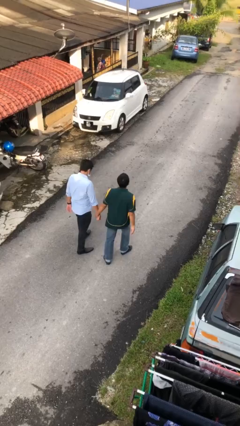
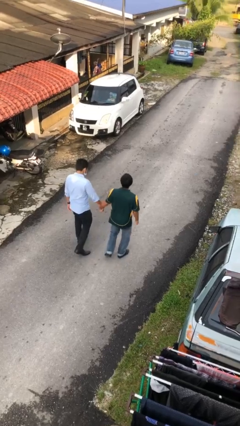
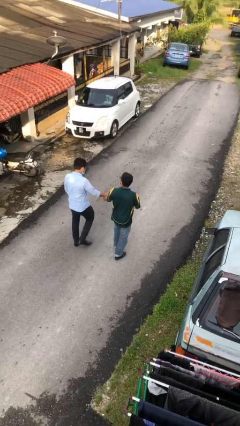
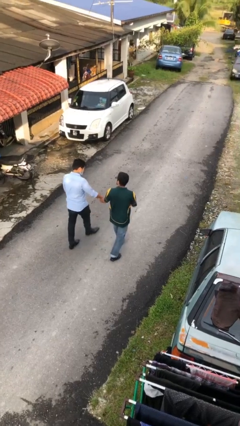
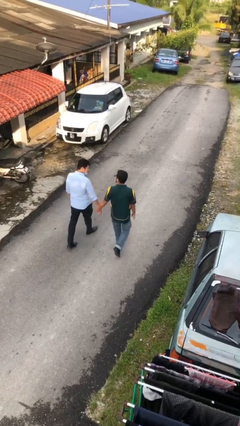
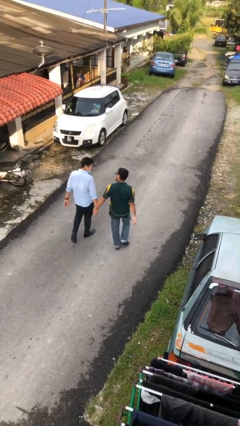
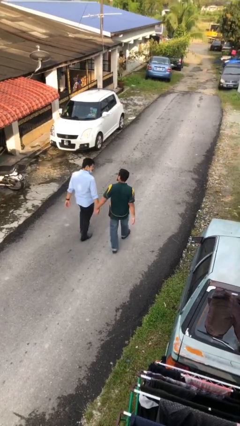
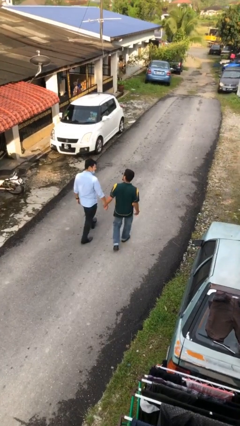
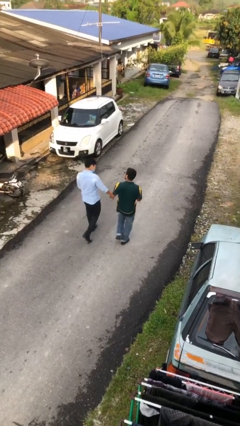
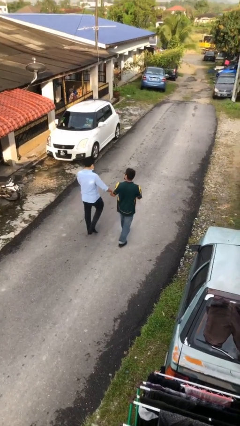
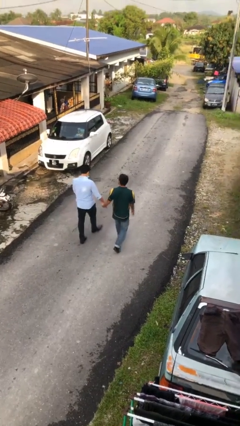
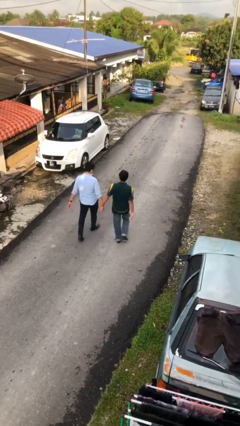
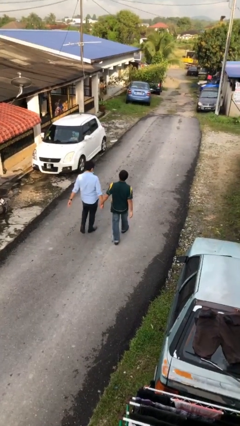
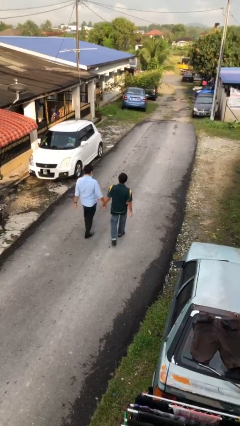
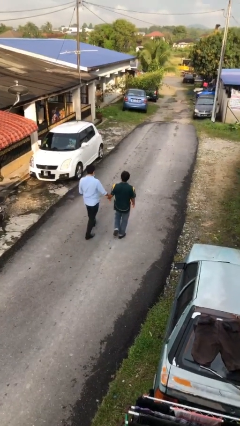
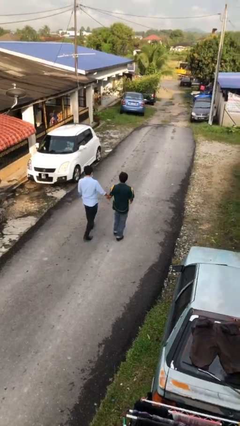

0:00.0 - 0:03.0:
person holds hand

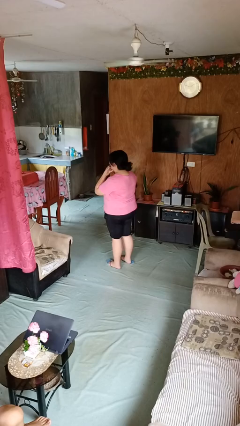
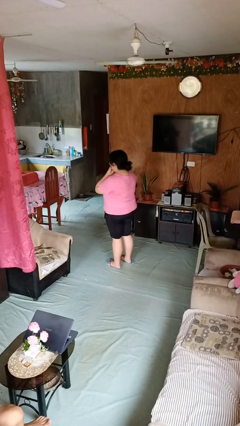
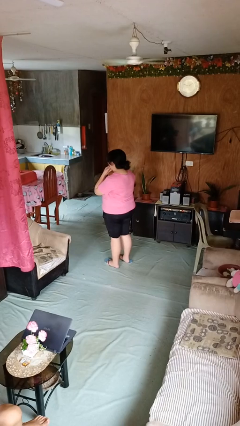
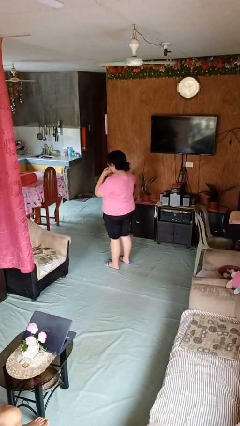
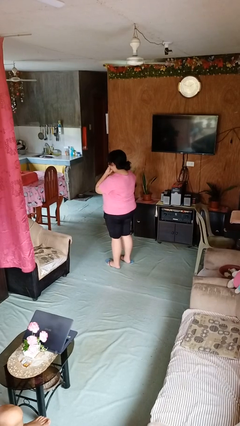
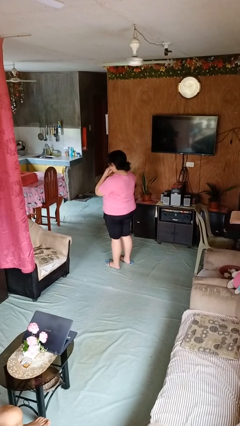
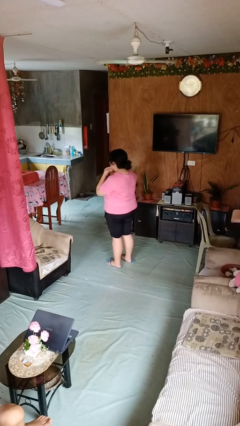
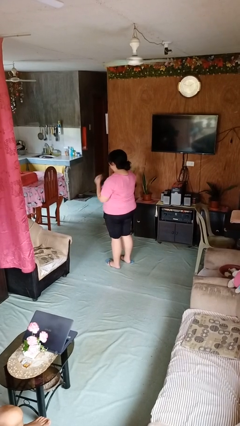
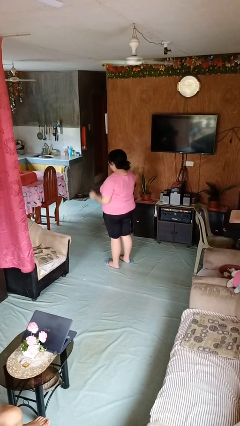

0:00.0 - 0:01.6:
person strokes chin

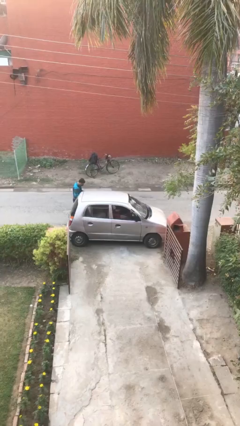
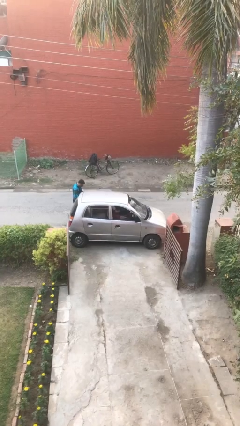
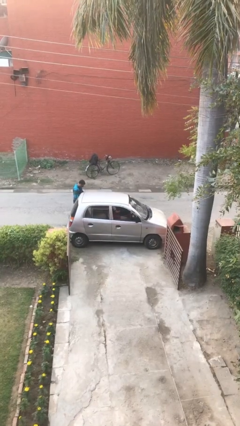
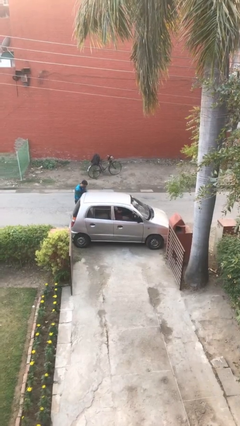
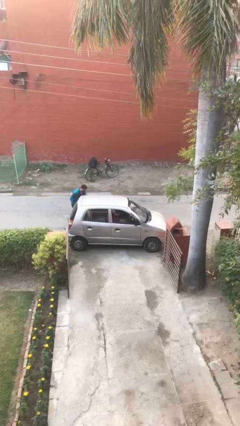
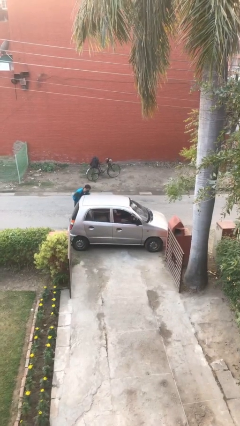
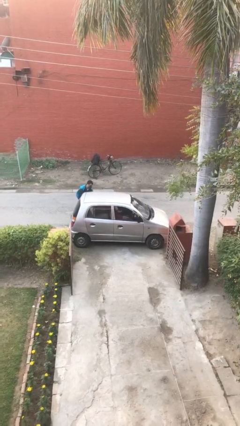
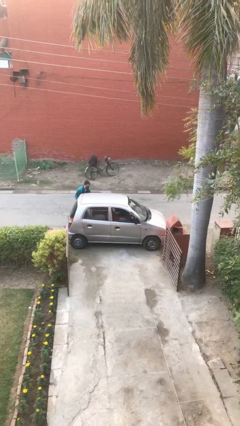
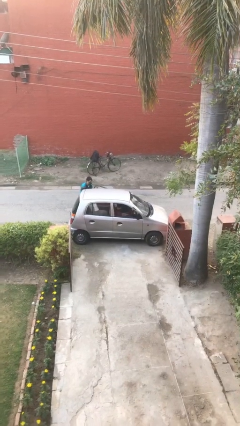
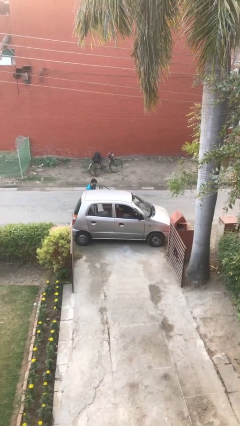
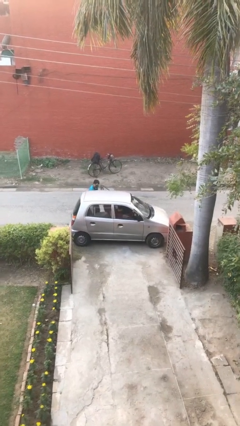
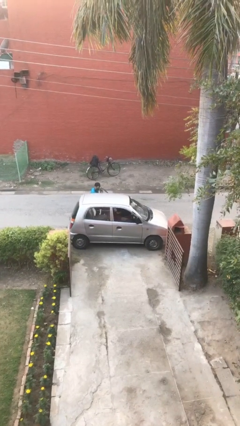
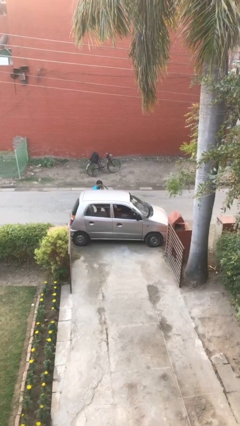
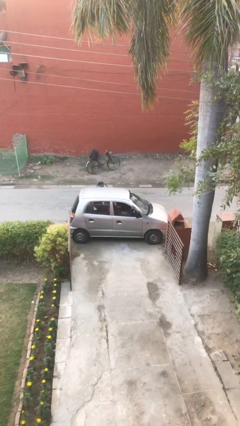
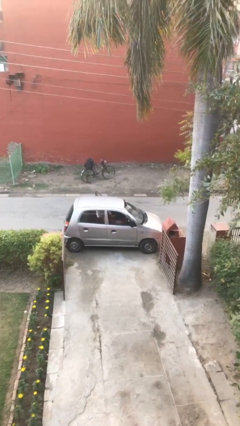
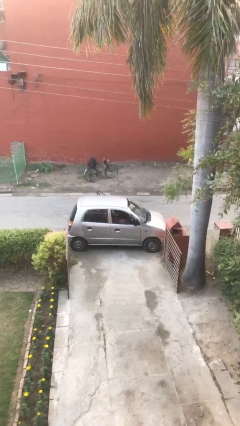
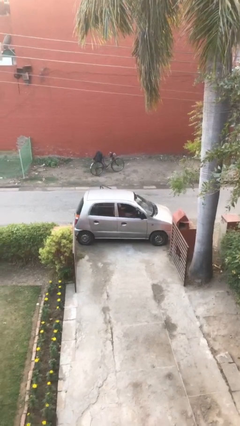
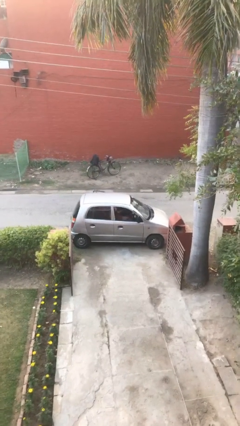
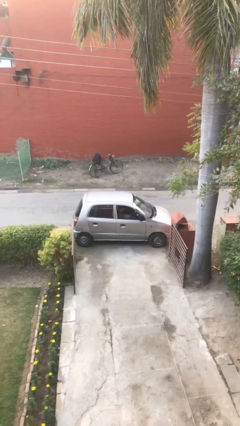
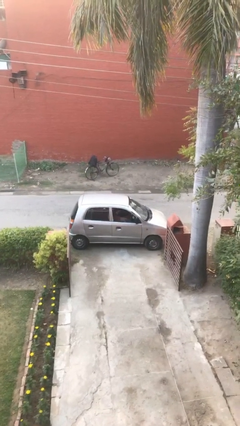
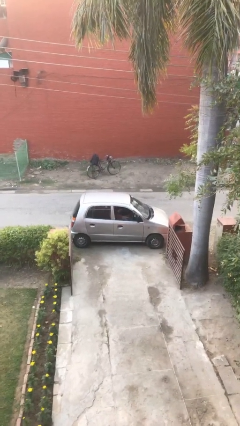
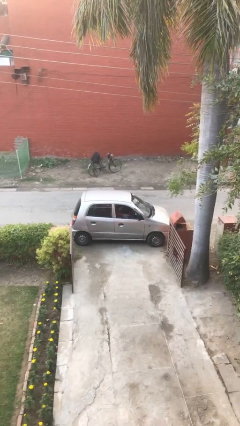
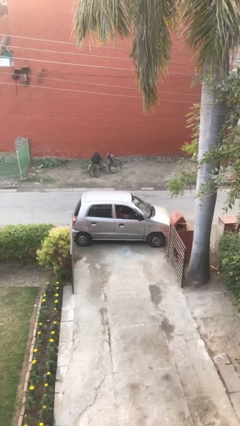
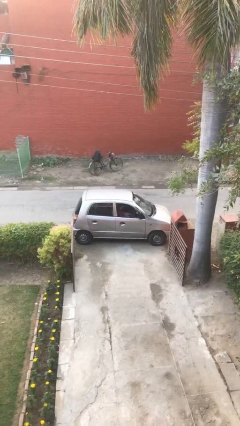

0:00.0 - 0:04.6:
car picks up person

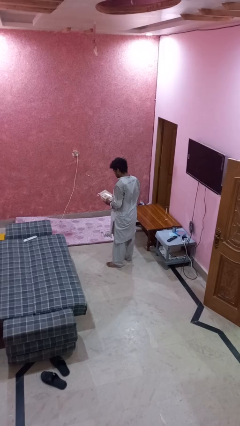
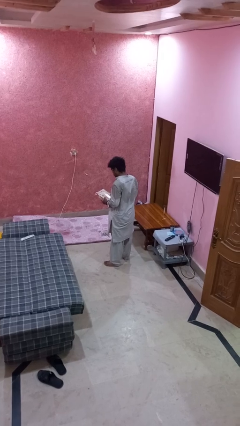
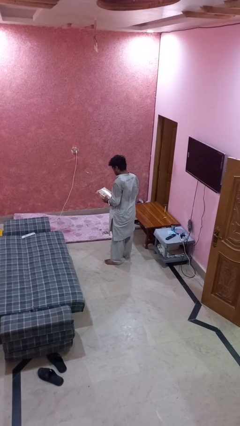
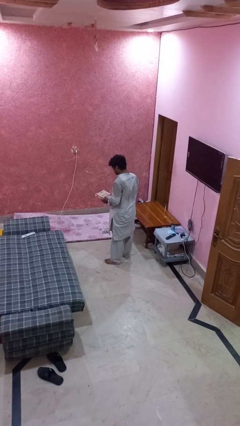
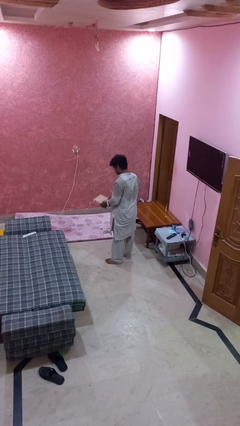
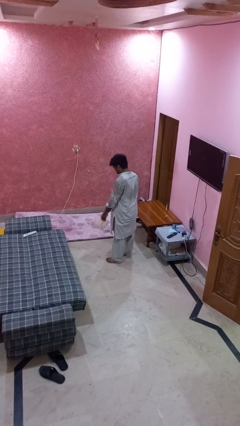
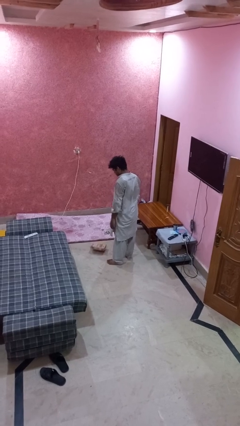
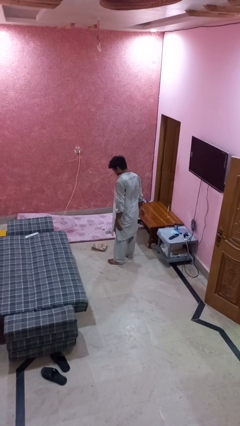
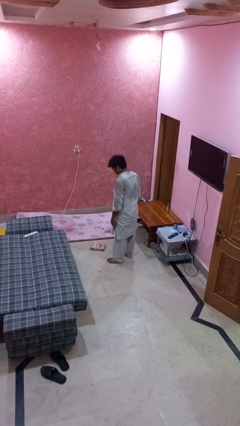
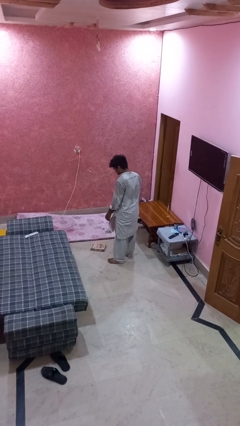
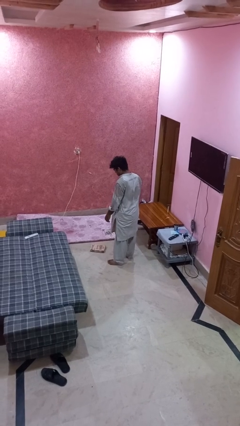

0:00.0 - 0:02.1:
person throws object to ground

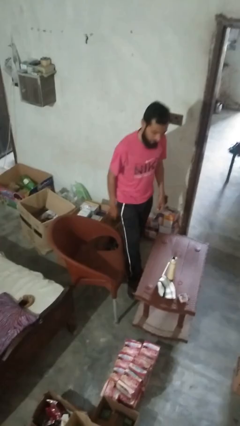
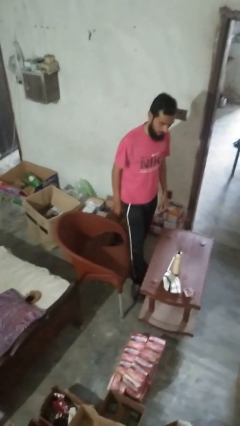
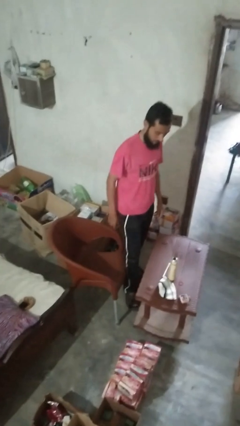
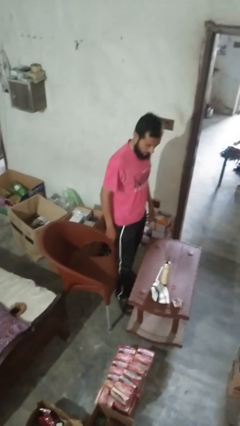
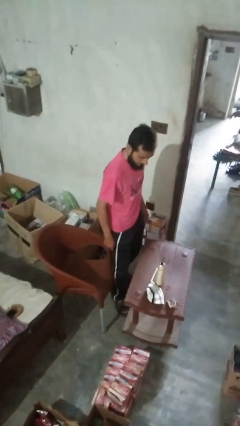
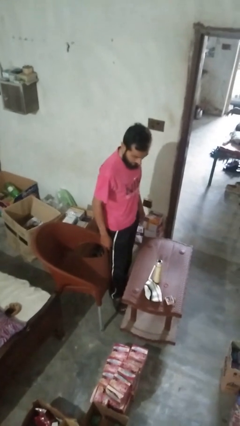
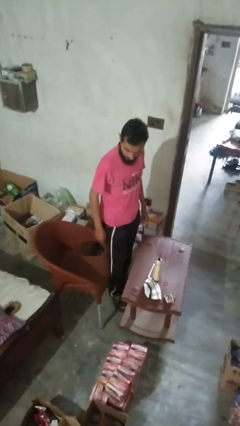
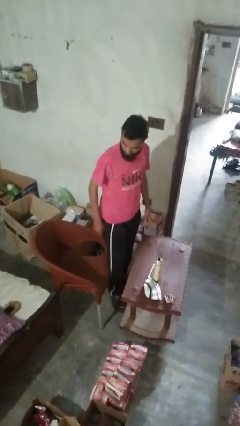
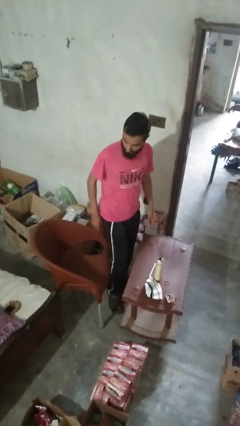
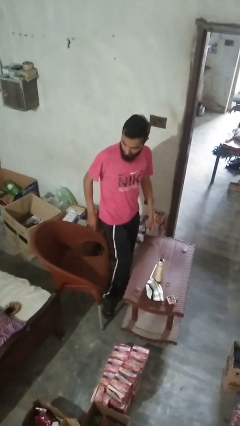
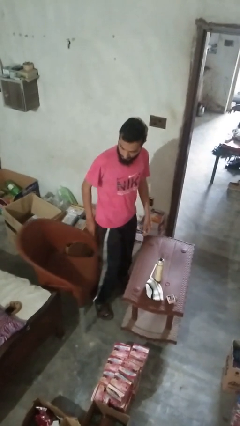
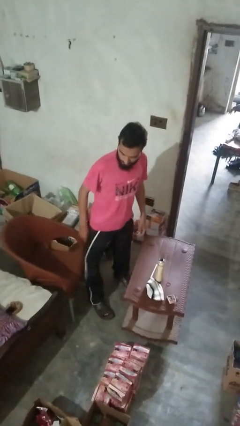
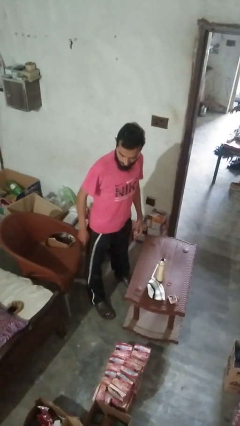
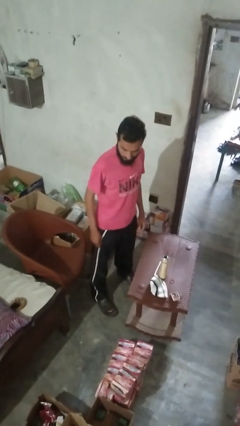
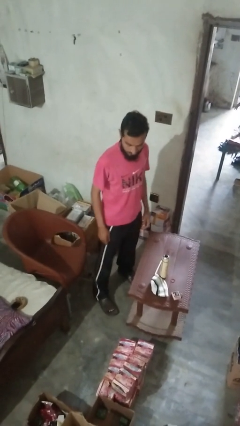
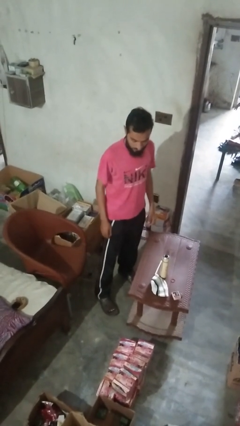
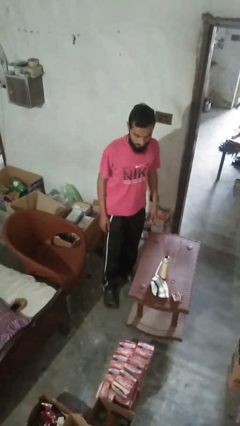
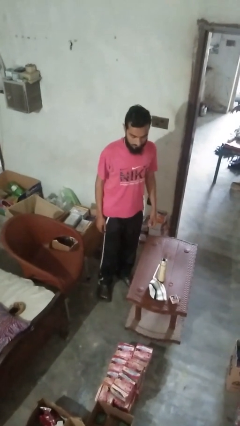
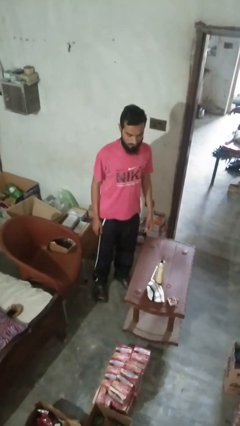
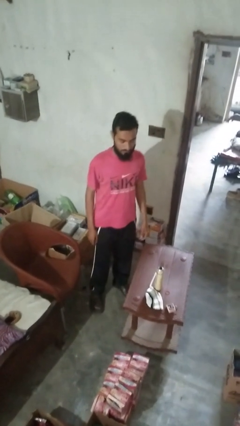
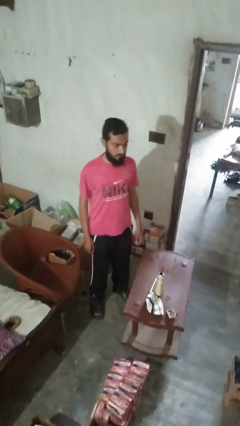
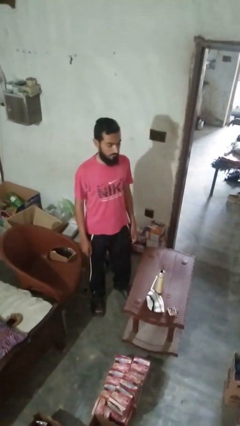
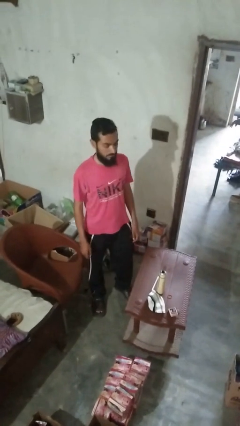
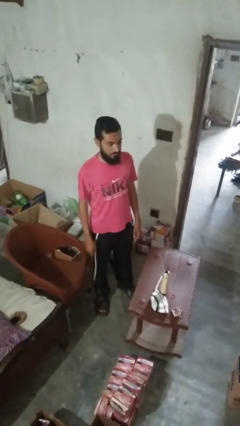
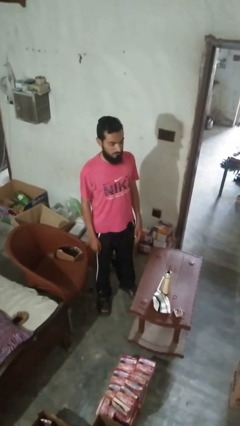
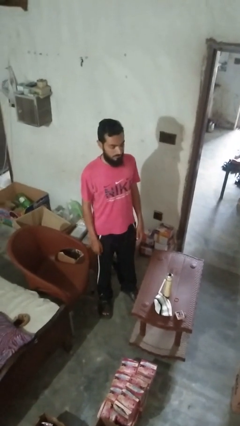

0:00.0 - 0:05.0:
person pushes in chair

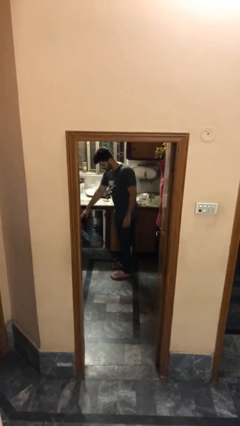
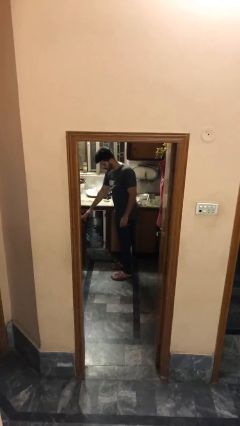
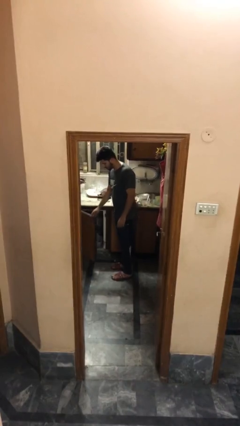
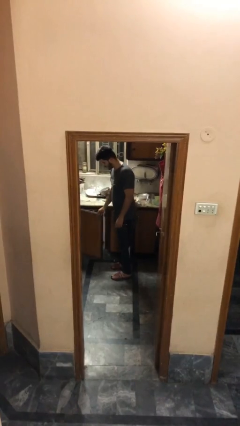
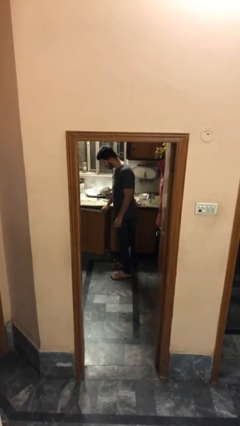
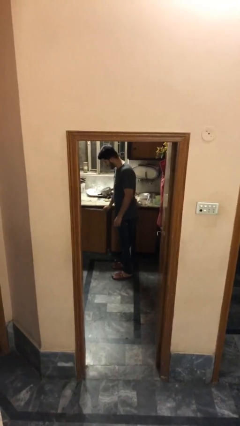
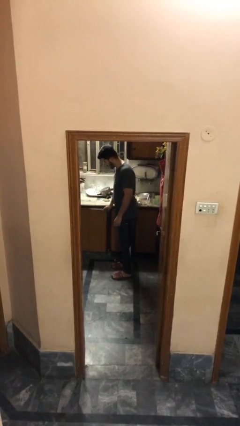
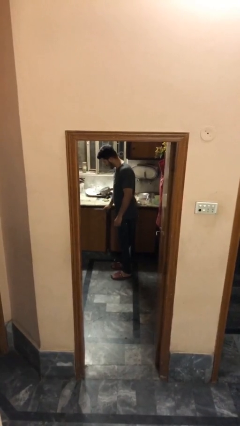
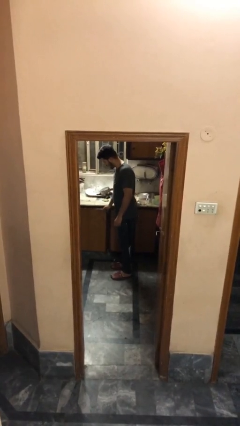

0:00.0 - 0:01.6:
person closes cabinet
